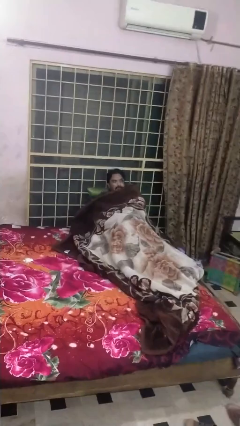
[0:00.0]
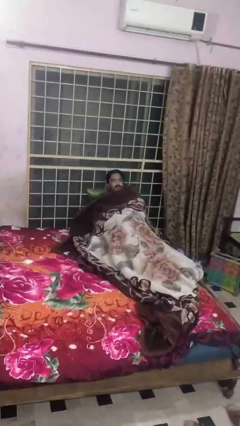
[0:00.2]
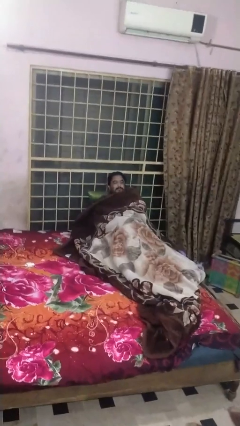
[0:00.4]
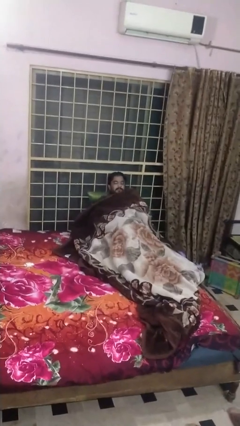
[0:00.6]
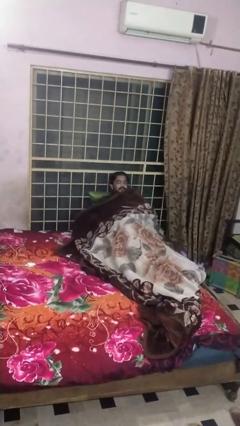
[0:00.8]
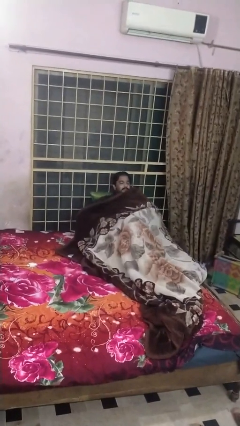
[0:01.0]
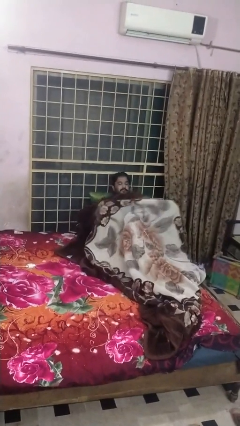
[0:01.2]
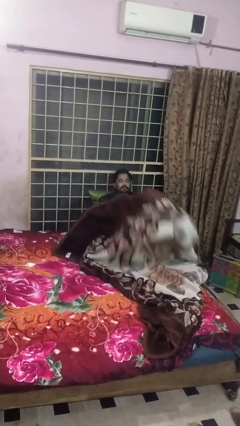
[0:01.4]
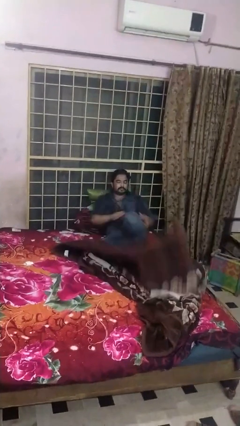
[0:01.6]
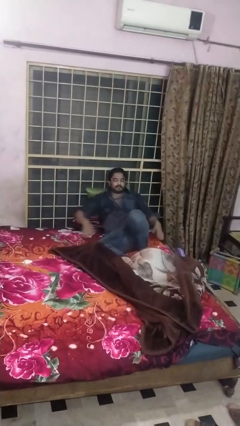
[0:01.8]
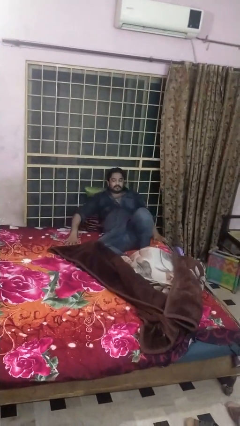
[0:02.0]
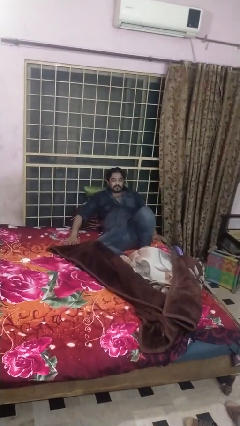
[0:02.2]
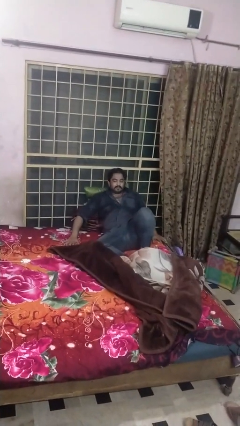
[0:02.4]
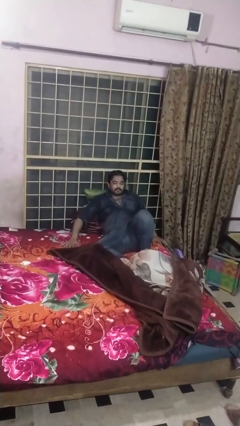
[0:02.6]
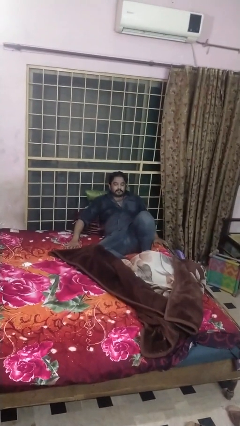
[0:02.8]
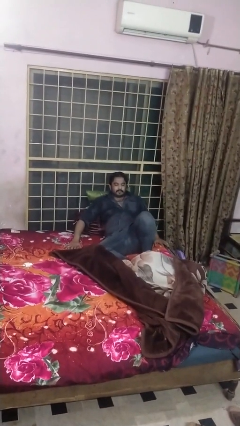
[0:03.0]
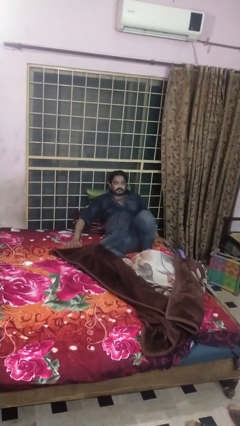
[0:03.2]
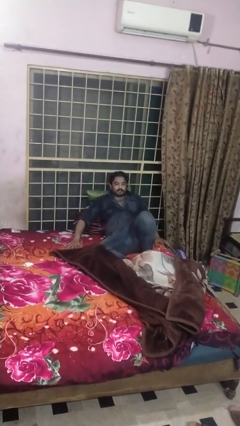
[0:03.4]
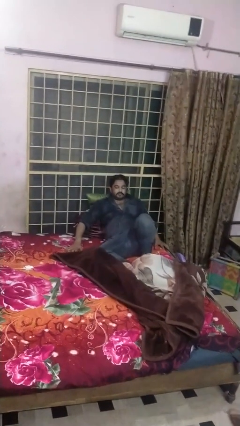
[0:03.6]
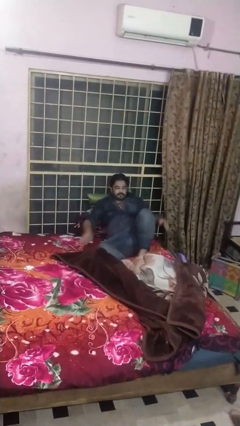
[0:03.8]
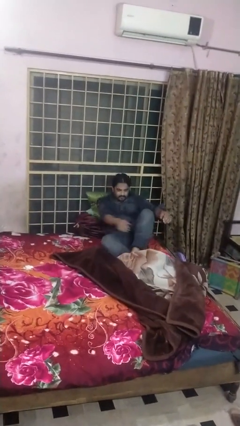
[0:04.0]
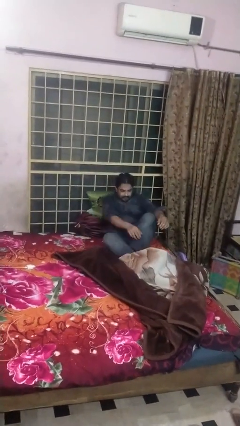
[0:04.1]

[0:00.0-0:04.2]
person uncovers with blanket
